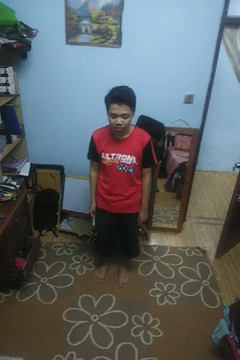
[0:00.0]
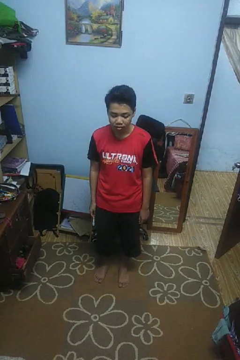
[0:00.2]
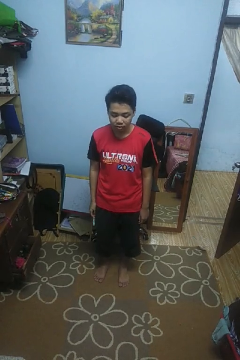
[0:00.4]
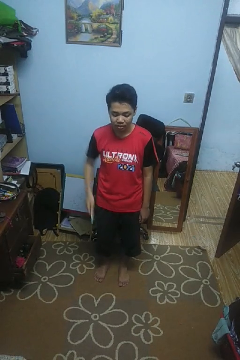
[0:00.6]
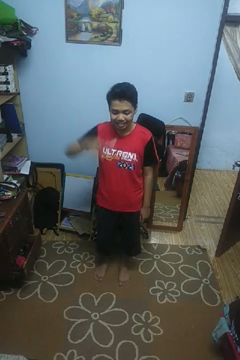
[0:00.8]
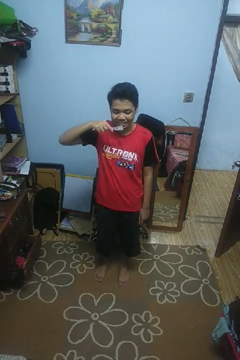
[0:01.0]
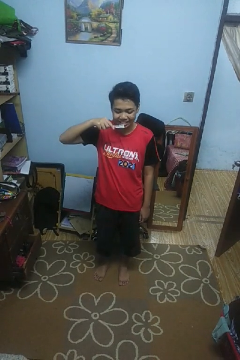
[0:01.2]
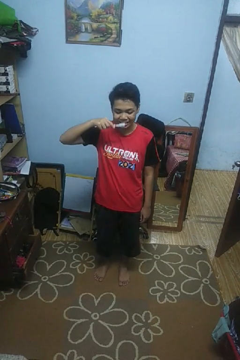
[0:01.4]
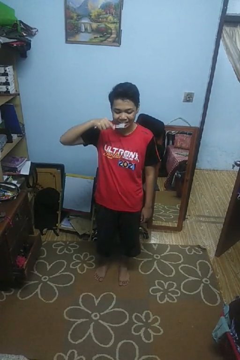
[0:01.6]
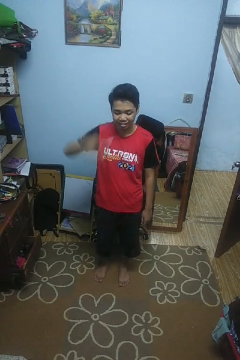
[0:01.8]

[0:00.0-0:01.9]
person brushes teeth

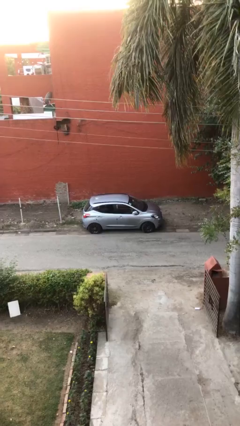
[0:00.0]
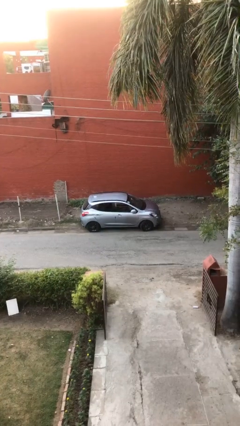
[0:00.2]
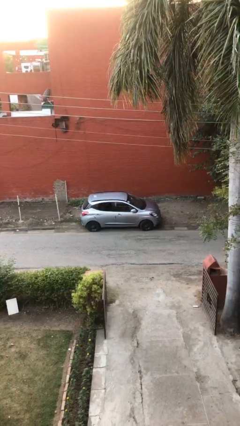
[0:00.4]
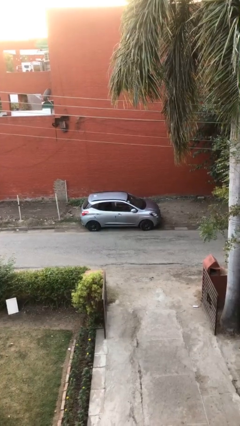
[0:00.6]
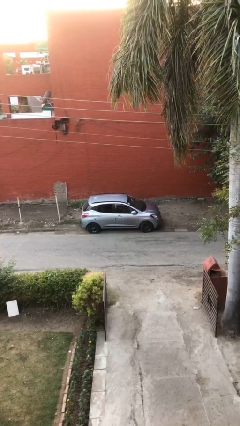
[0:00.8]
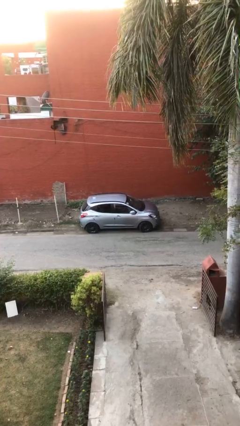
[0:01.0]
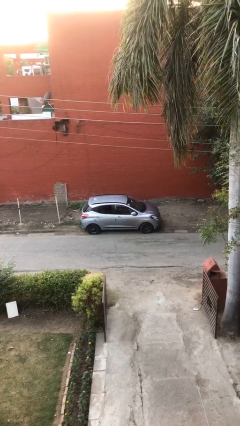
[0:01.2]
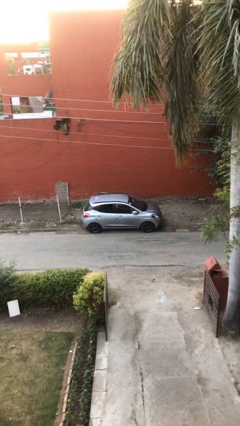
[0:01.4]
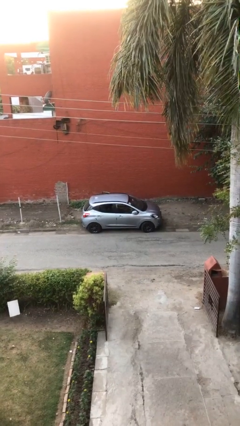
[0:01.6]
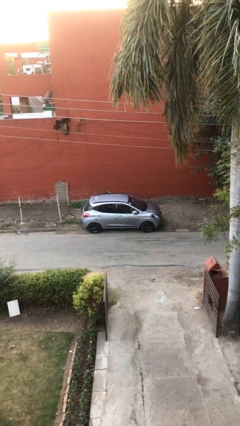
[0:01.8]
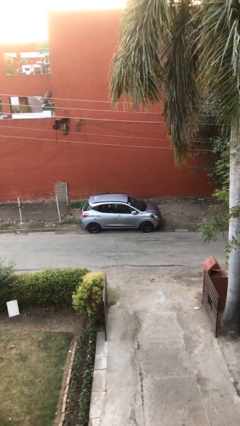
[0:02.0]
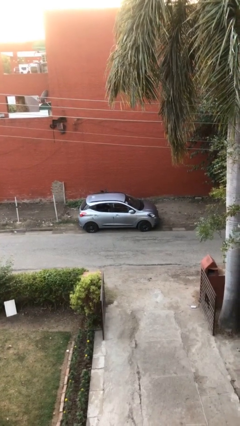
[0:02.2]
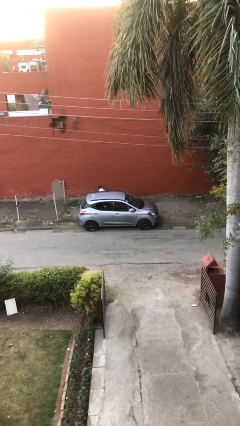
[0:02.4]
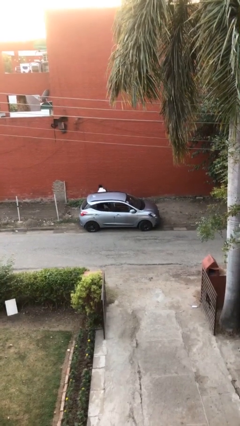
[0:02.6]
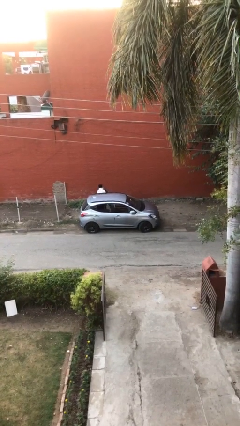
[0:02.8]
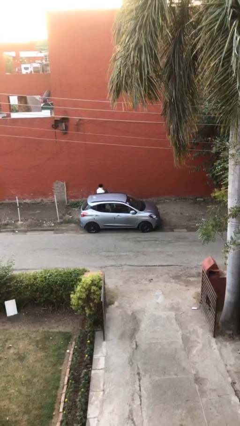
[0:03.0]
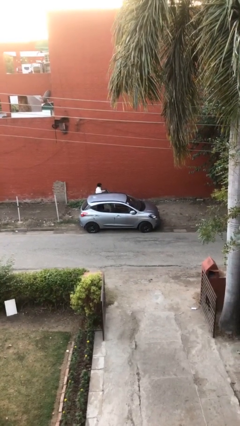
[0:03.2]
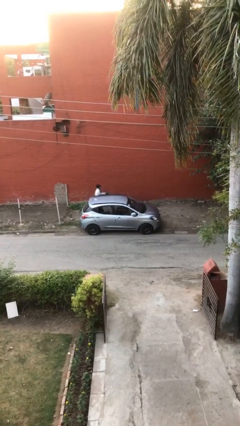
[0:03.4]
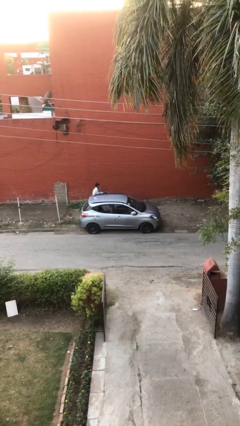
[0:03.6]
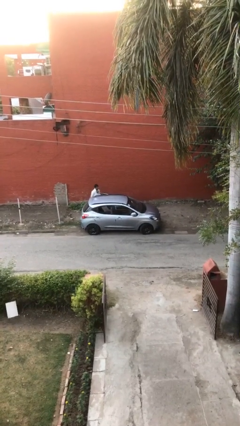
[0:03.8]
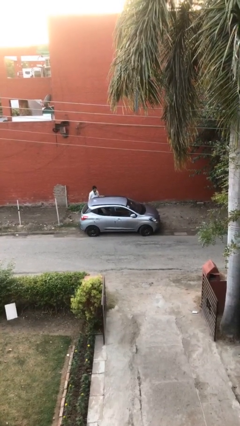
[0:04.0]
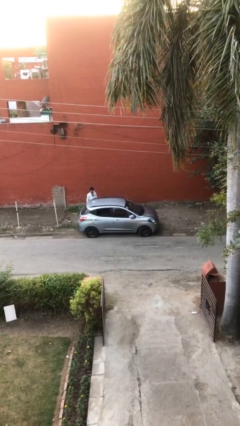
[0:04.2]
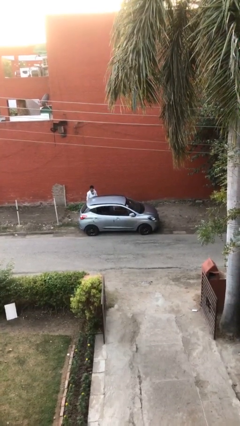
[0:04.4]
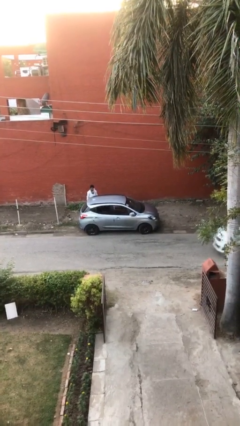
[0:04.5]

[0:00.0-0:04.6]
car drops off person

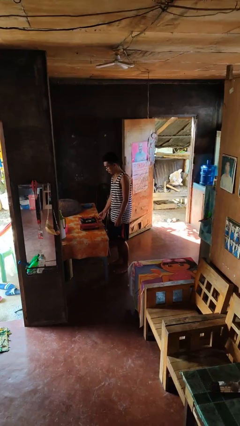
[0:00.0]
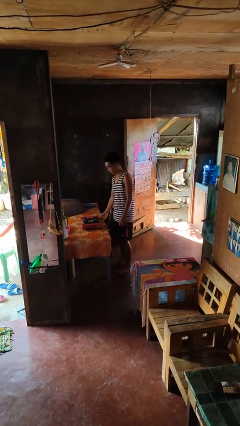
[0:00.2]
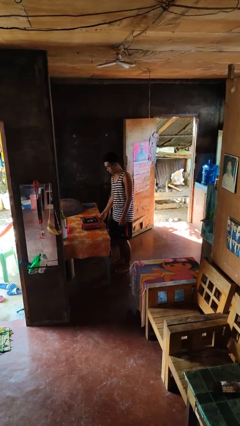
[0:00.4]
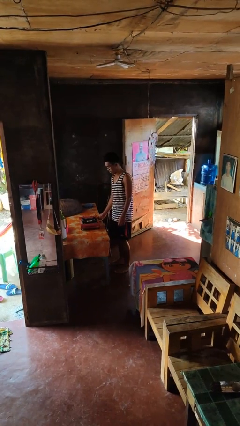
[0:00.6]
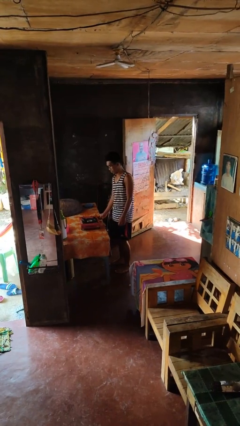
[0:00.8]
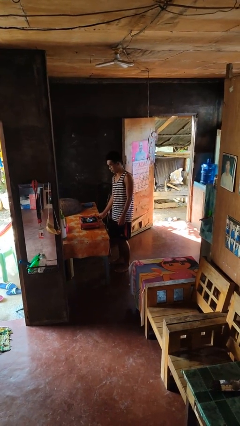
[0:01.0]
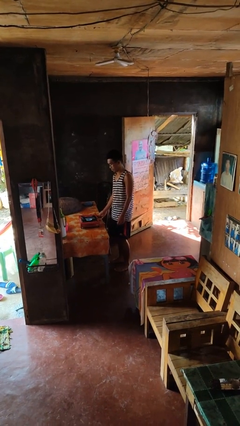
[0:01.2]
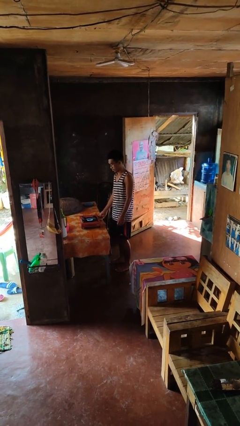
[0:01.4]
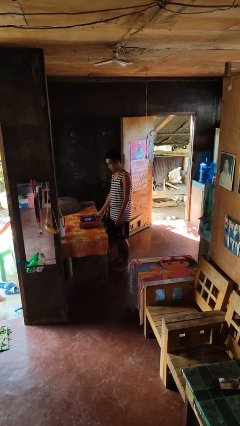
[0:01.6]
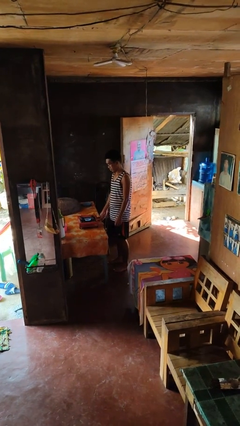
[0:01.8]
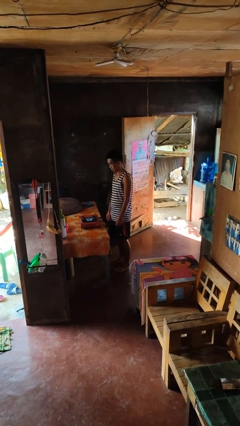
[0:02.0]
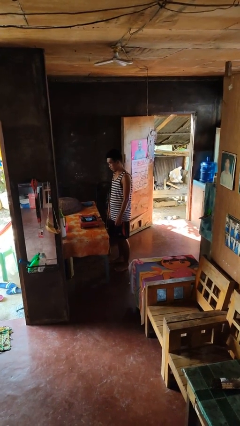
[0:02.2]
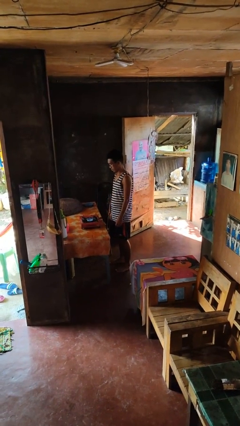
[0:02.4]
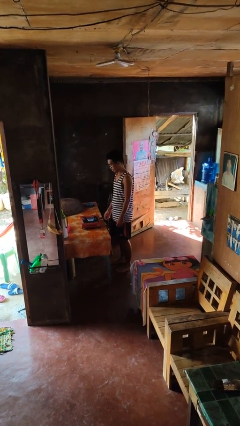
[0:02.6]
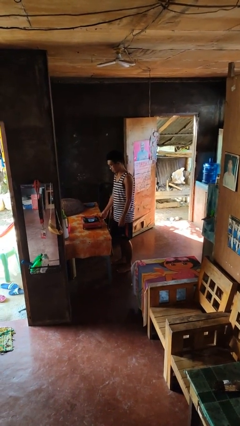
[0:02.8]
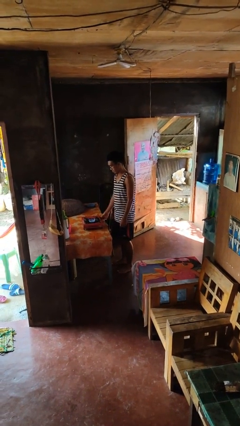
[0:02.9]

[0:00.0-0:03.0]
person turns on stovetop

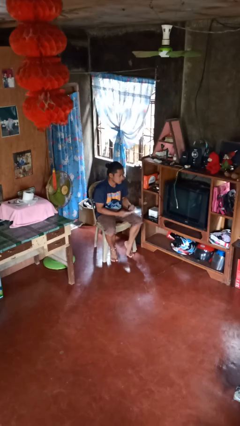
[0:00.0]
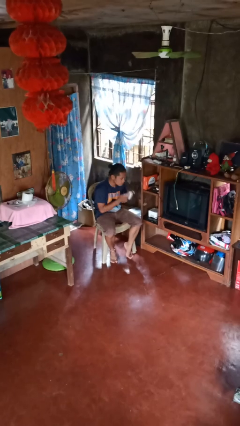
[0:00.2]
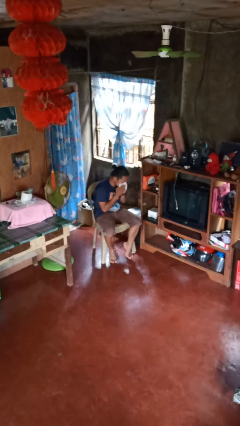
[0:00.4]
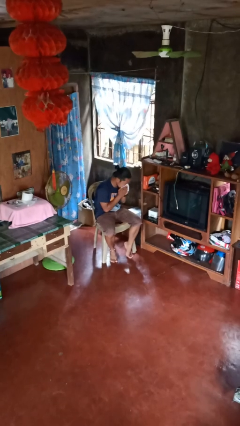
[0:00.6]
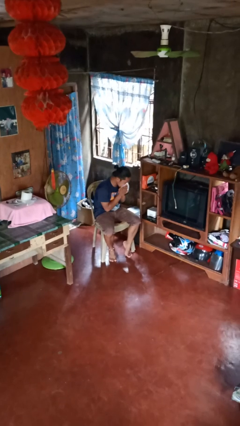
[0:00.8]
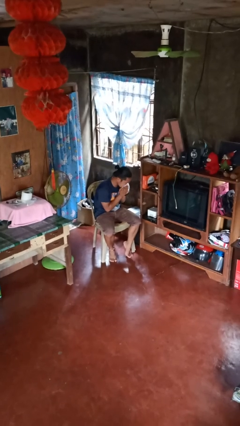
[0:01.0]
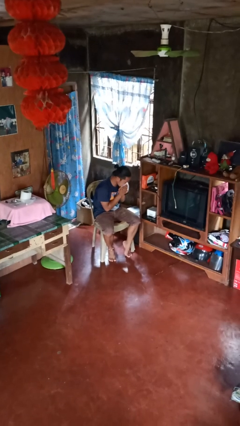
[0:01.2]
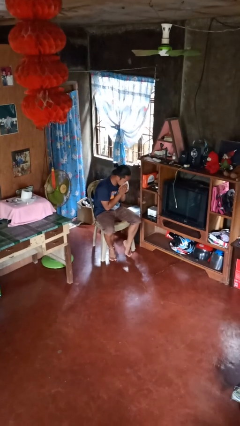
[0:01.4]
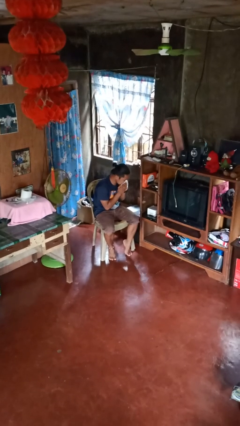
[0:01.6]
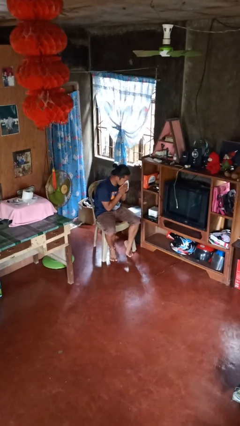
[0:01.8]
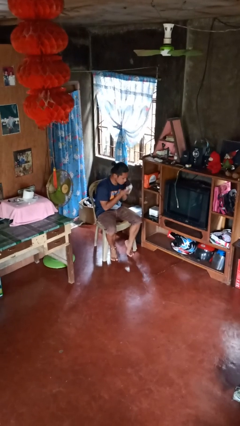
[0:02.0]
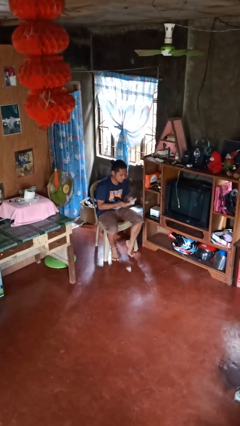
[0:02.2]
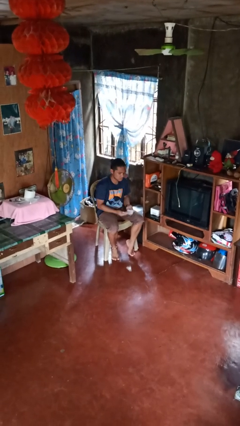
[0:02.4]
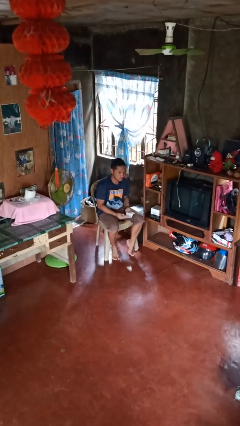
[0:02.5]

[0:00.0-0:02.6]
person blows nose

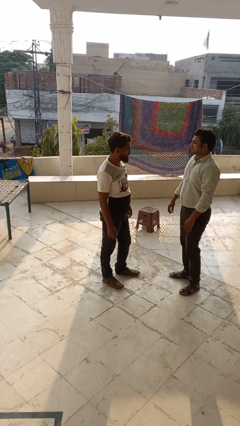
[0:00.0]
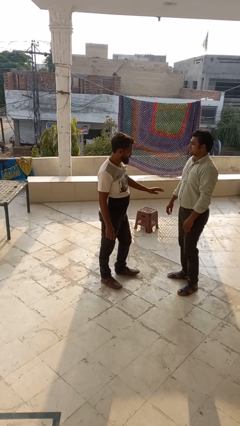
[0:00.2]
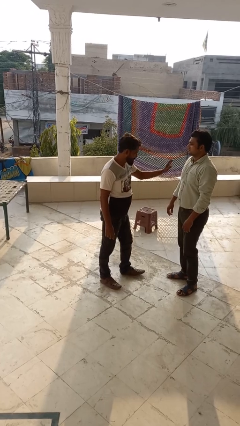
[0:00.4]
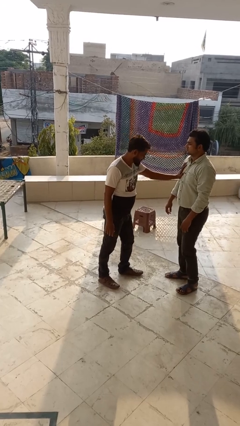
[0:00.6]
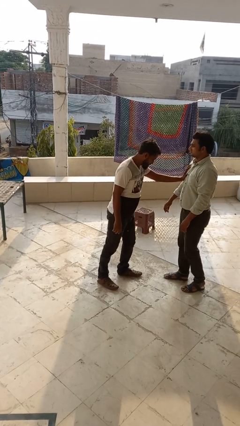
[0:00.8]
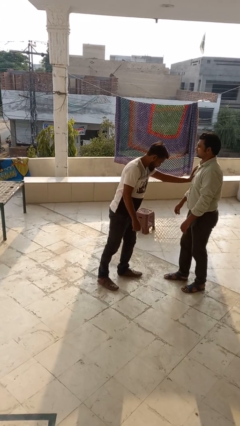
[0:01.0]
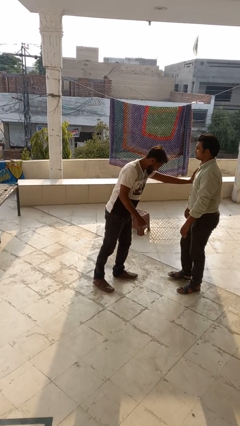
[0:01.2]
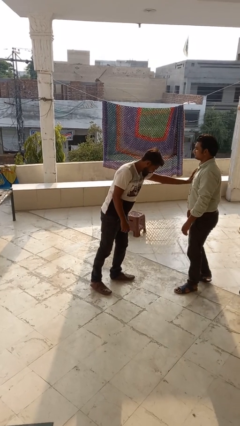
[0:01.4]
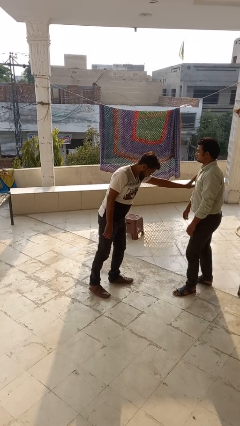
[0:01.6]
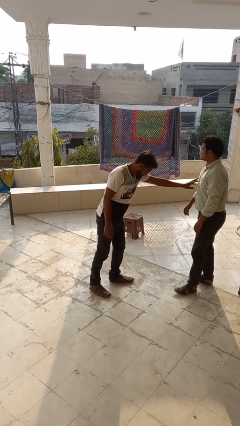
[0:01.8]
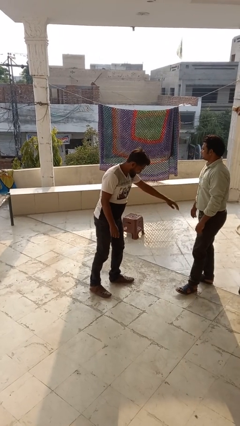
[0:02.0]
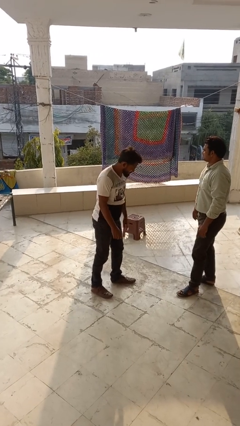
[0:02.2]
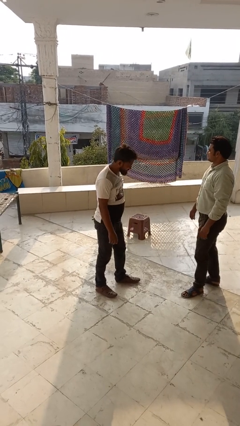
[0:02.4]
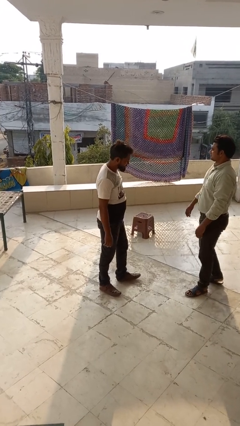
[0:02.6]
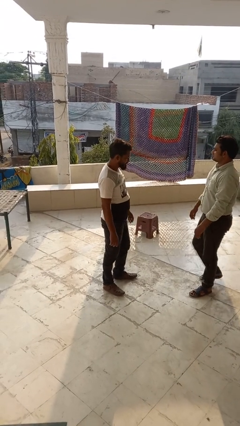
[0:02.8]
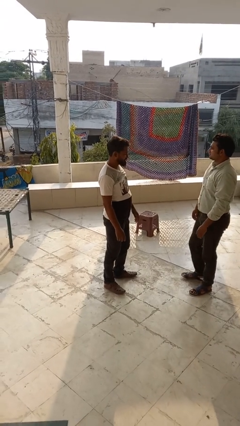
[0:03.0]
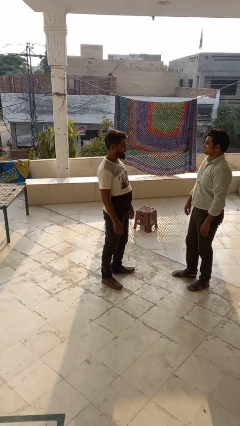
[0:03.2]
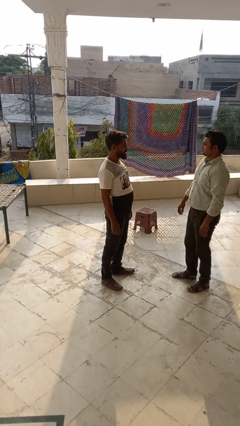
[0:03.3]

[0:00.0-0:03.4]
person shoves person

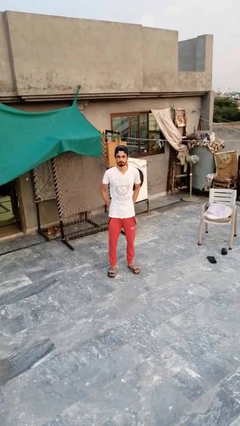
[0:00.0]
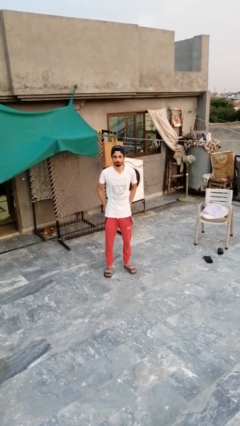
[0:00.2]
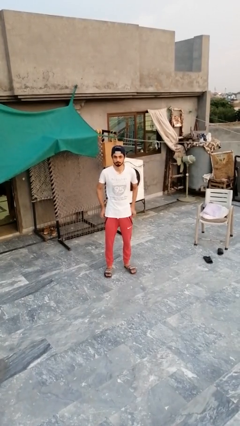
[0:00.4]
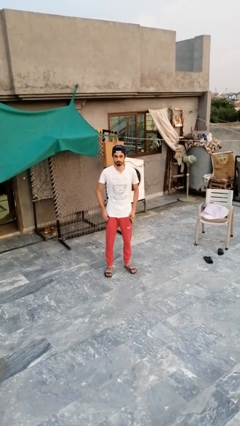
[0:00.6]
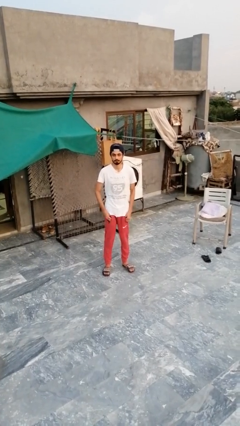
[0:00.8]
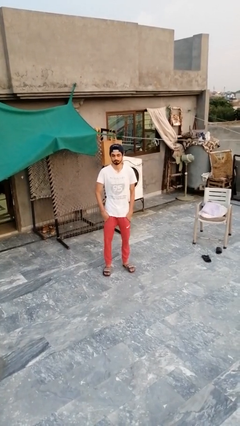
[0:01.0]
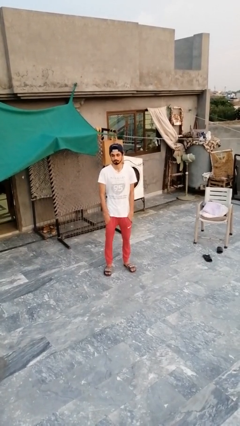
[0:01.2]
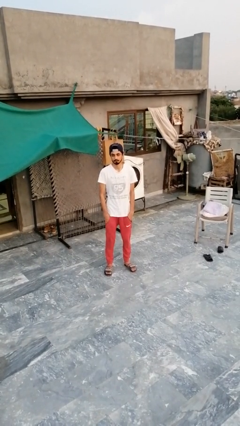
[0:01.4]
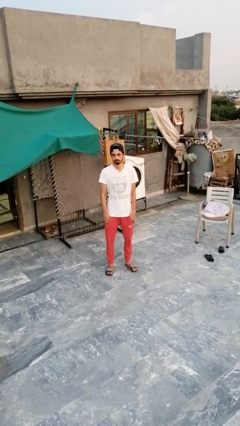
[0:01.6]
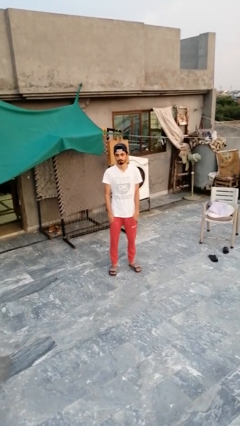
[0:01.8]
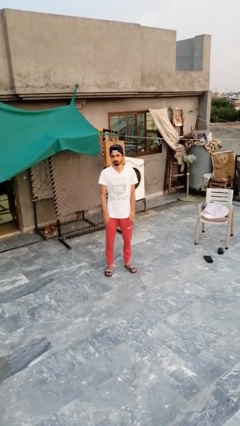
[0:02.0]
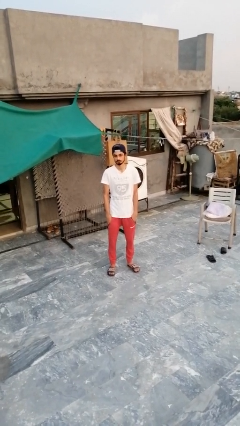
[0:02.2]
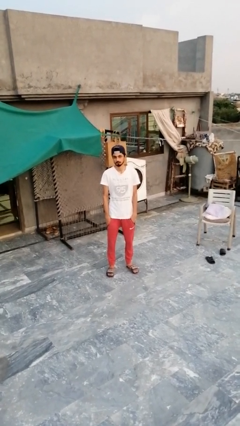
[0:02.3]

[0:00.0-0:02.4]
person puts hands in back pockets
